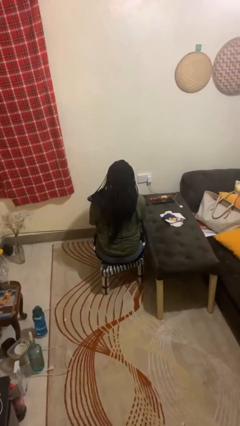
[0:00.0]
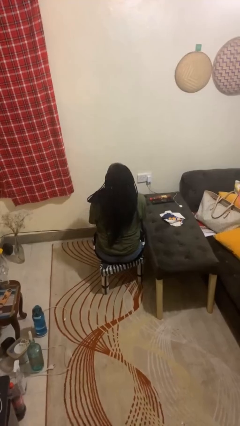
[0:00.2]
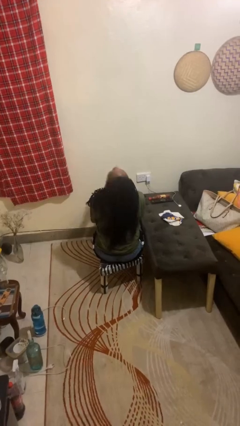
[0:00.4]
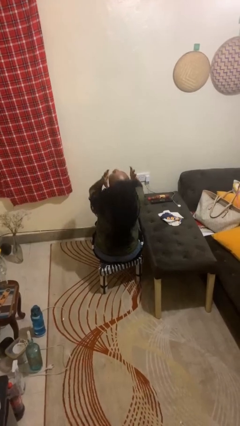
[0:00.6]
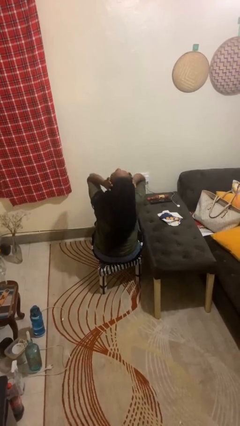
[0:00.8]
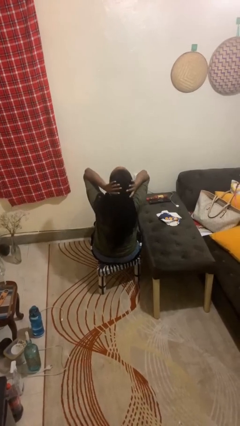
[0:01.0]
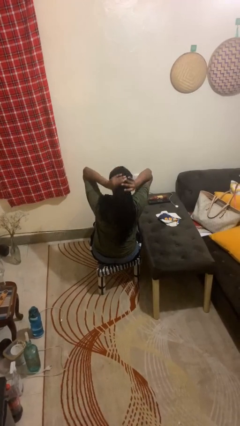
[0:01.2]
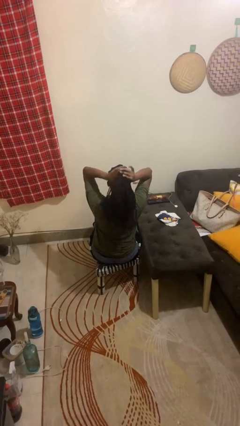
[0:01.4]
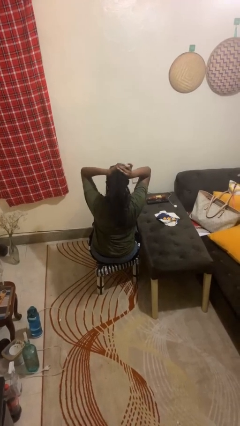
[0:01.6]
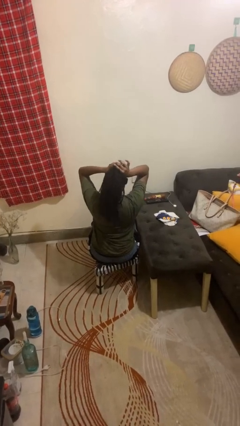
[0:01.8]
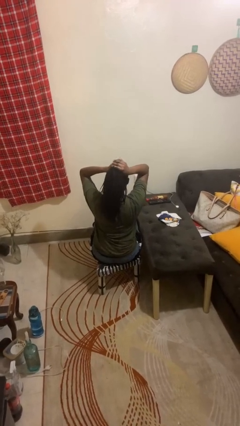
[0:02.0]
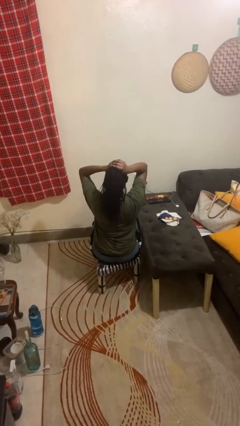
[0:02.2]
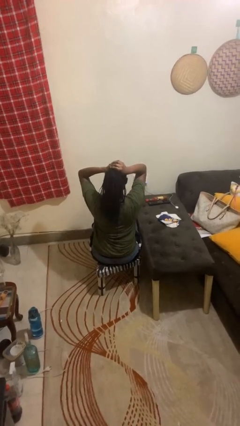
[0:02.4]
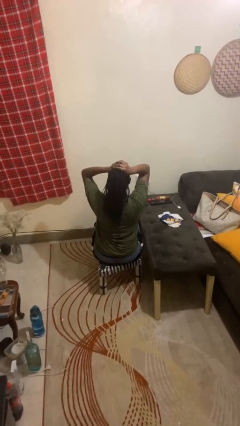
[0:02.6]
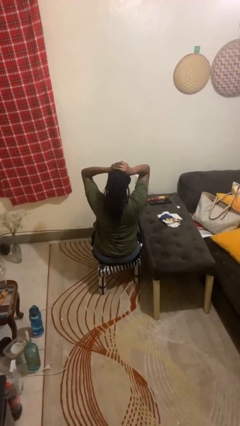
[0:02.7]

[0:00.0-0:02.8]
person puts hair in ponytail

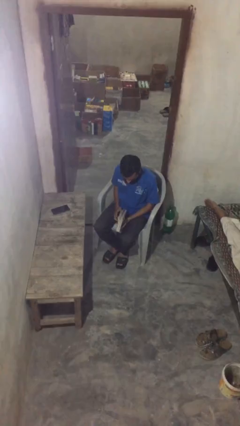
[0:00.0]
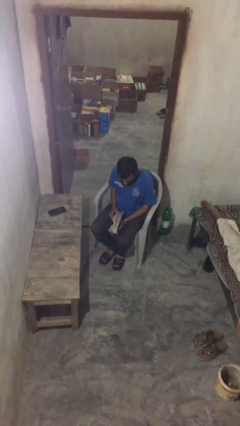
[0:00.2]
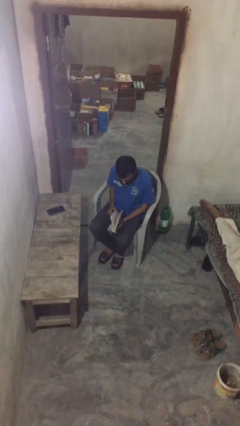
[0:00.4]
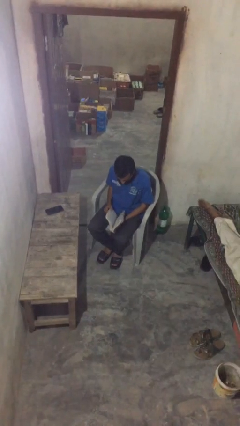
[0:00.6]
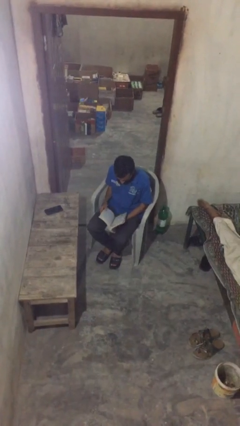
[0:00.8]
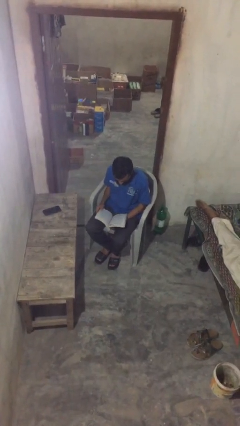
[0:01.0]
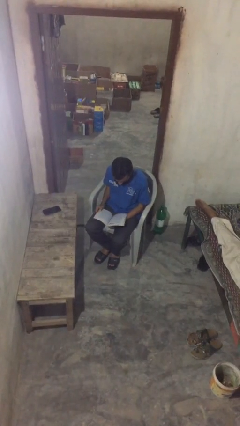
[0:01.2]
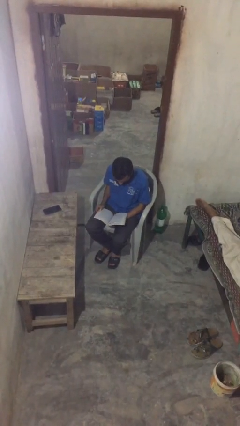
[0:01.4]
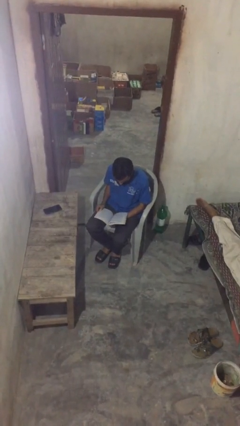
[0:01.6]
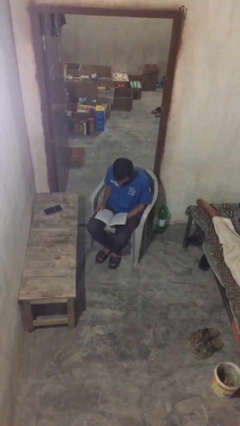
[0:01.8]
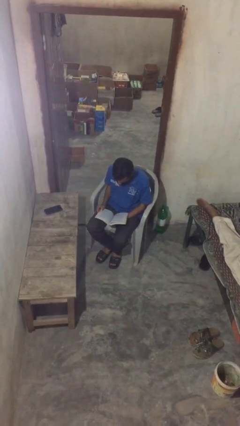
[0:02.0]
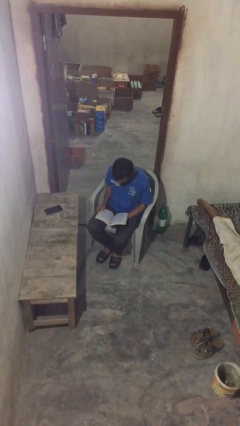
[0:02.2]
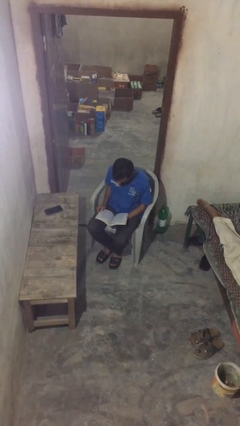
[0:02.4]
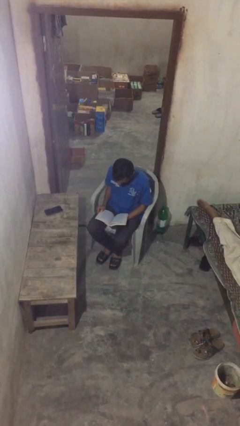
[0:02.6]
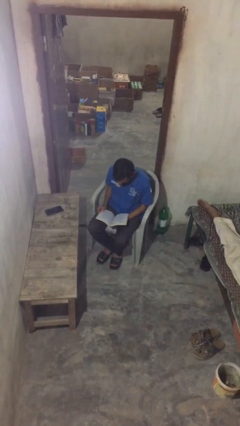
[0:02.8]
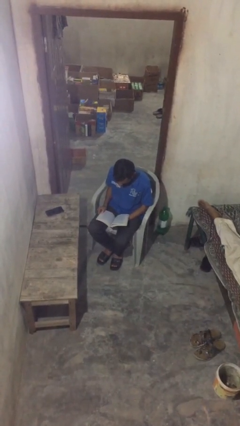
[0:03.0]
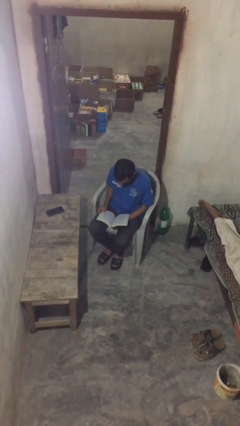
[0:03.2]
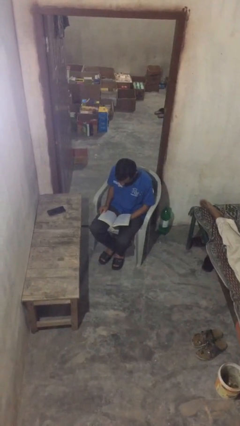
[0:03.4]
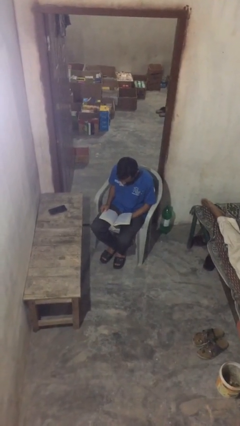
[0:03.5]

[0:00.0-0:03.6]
person reads document

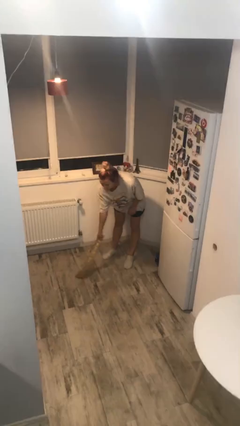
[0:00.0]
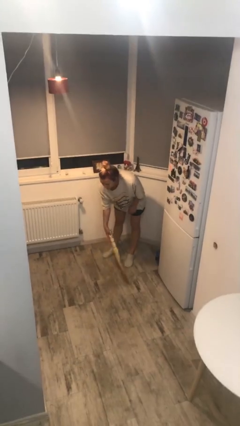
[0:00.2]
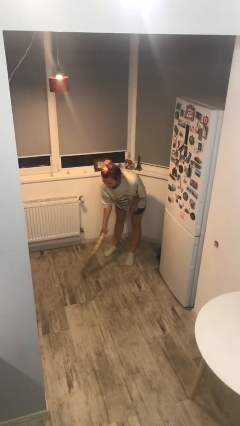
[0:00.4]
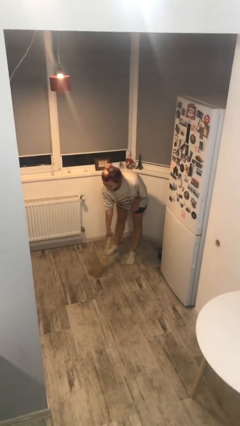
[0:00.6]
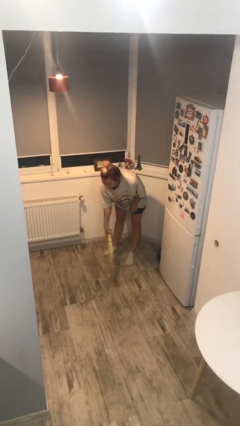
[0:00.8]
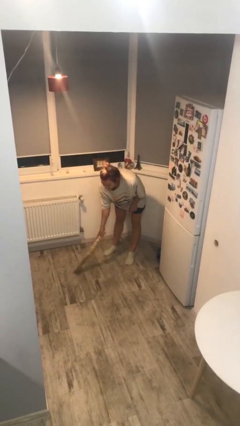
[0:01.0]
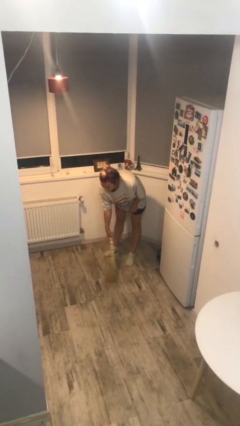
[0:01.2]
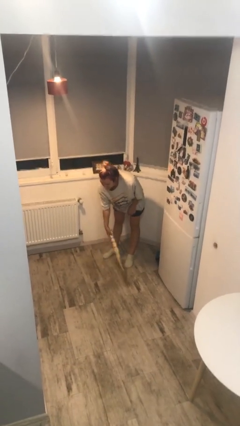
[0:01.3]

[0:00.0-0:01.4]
person sweeps floor

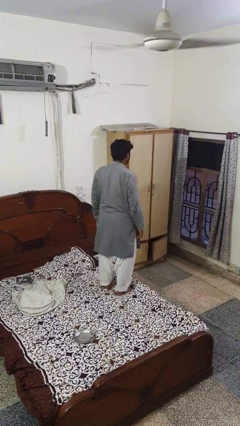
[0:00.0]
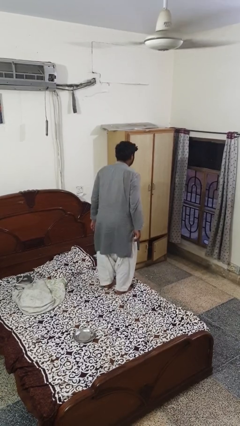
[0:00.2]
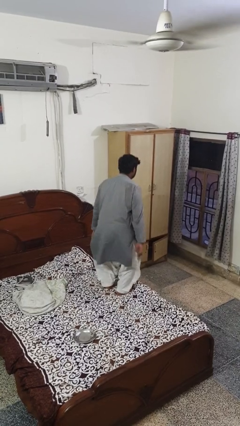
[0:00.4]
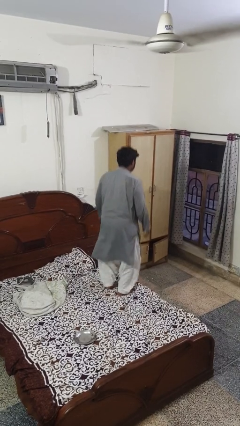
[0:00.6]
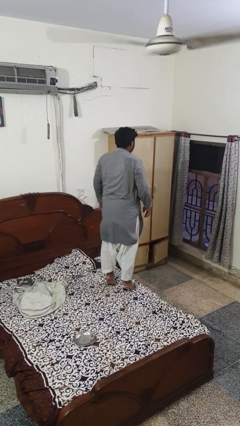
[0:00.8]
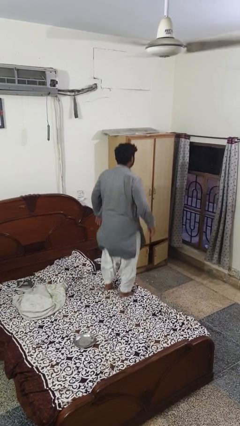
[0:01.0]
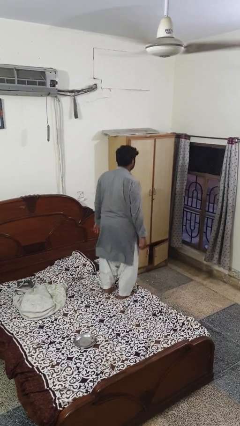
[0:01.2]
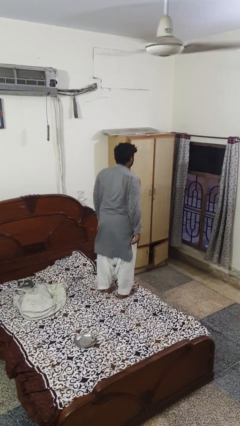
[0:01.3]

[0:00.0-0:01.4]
person jumps on bed

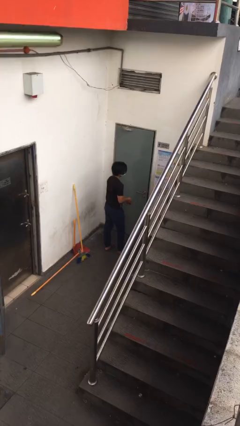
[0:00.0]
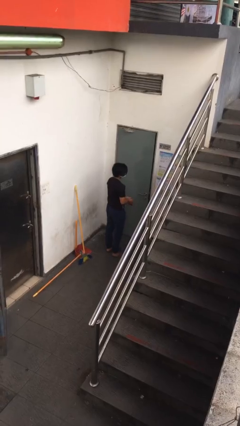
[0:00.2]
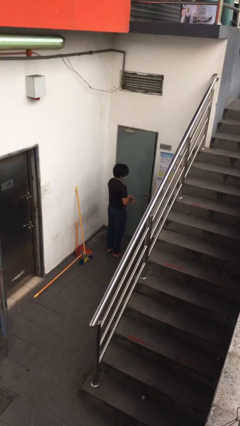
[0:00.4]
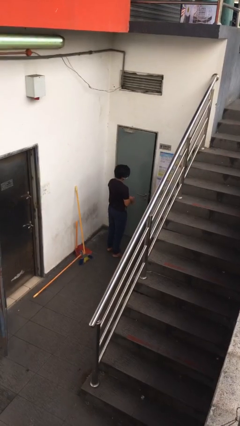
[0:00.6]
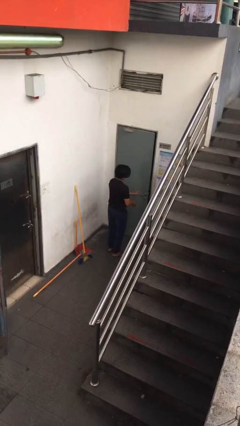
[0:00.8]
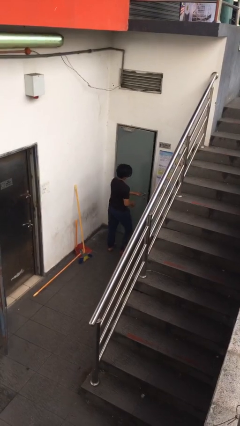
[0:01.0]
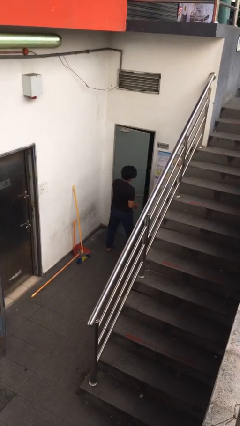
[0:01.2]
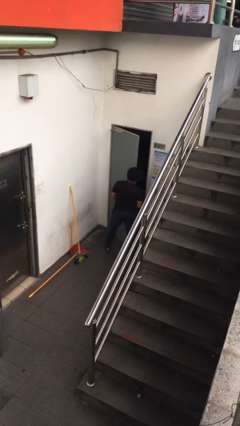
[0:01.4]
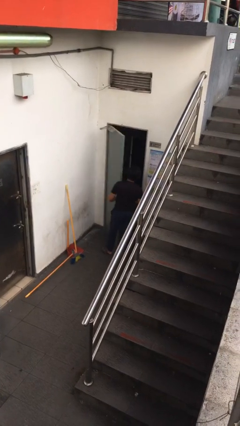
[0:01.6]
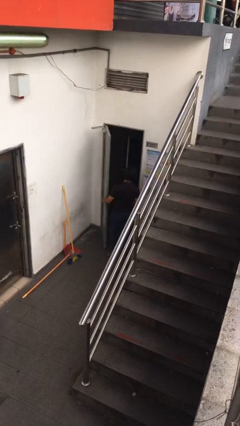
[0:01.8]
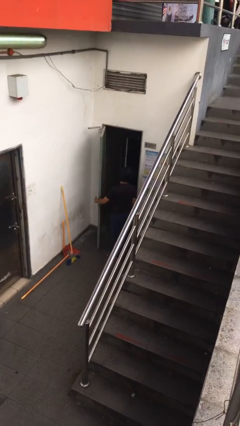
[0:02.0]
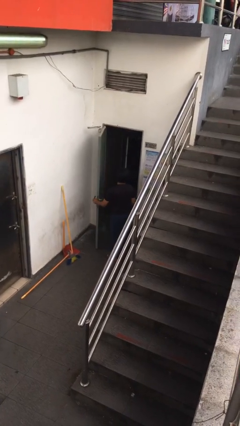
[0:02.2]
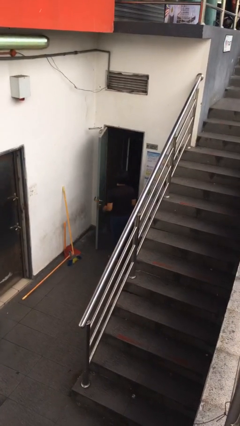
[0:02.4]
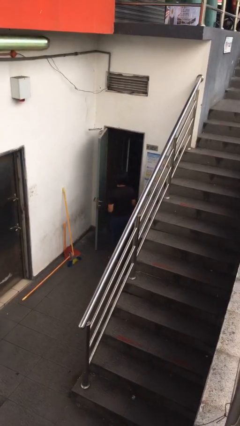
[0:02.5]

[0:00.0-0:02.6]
person opens facility door

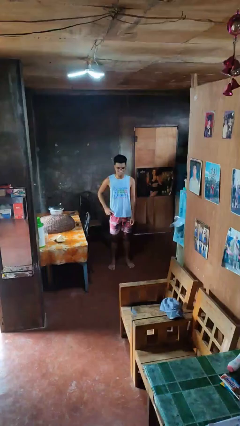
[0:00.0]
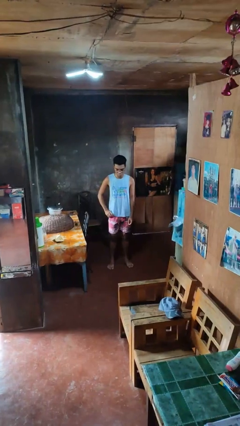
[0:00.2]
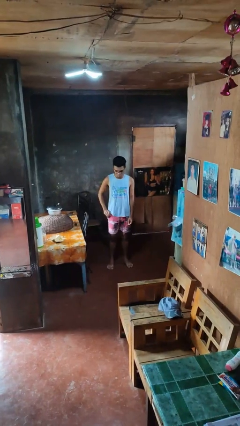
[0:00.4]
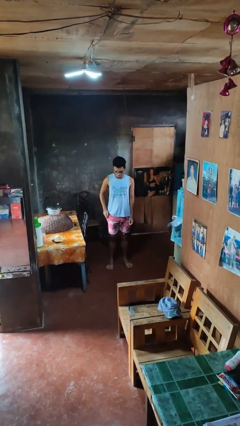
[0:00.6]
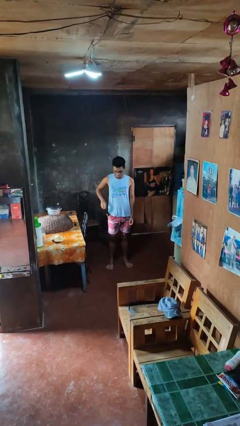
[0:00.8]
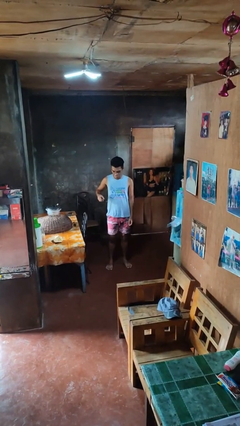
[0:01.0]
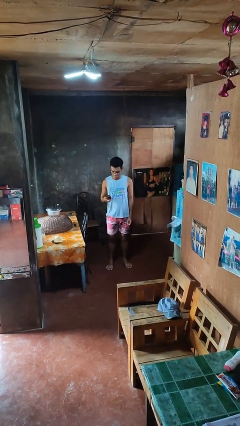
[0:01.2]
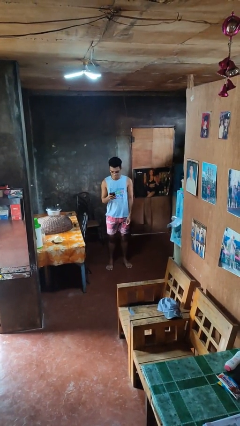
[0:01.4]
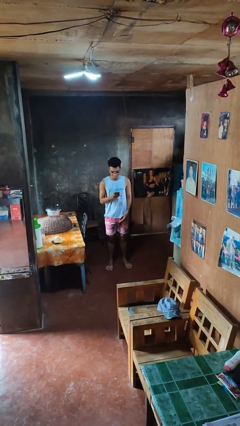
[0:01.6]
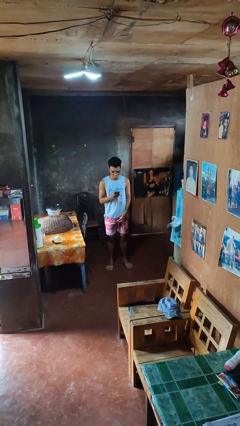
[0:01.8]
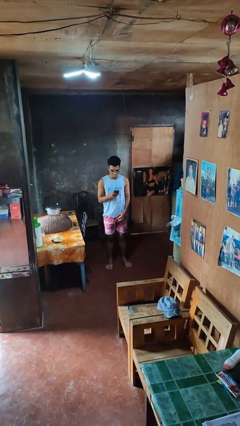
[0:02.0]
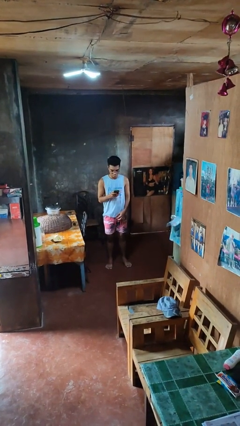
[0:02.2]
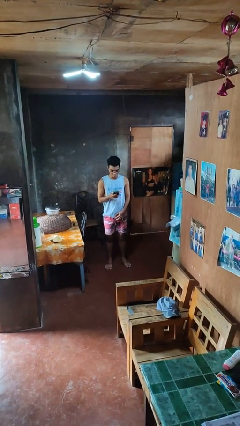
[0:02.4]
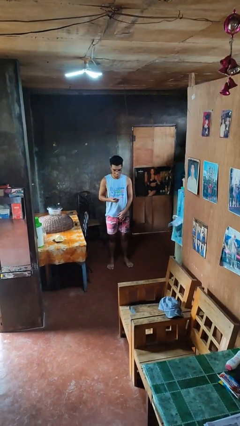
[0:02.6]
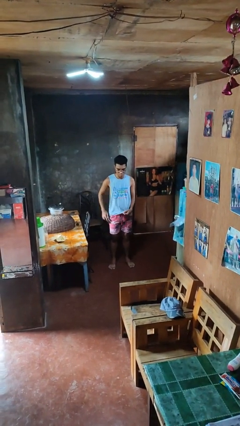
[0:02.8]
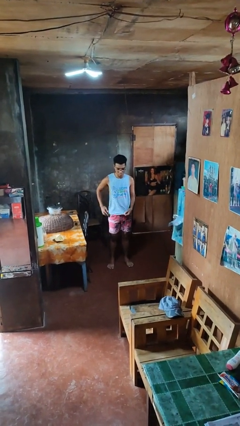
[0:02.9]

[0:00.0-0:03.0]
person takes phone from pocket

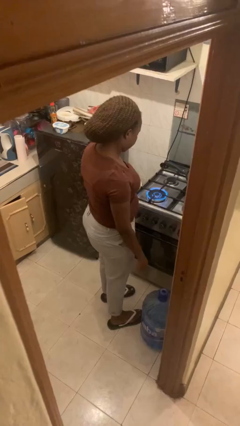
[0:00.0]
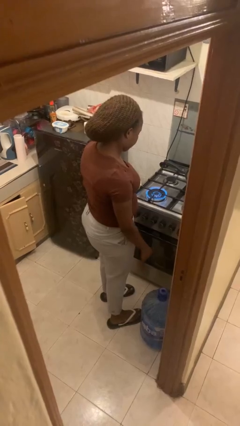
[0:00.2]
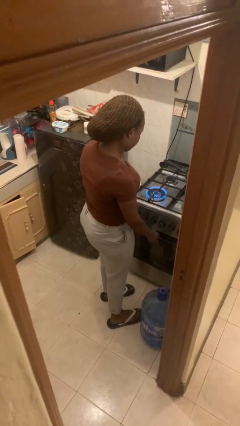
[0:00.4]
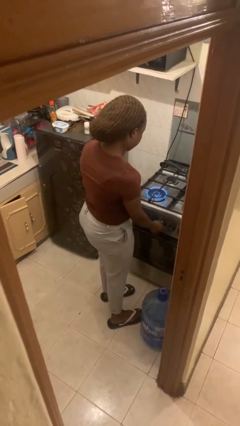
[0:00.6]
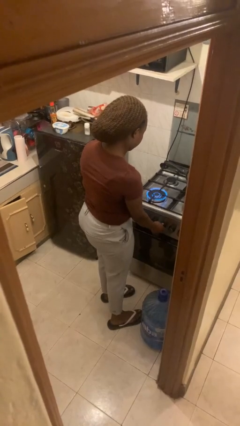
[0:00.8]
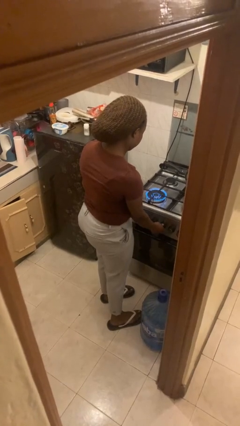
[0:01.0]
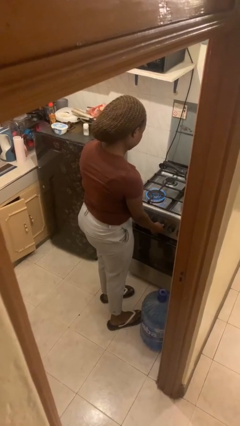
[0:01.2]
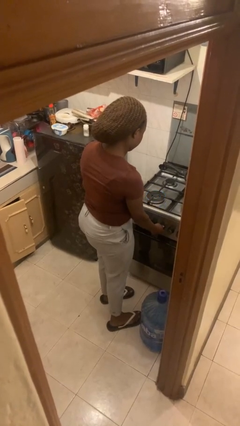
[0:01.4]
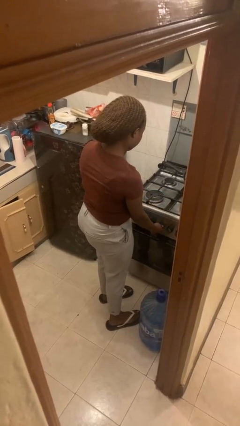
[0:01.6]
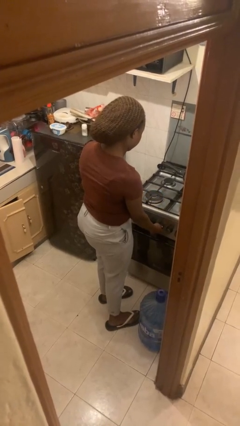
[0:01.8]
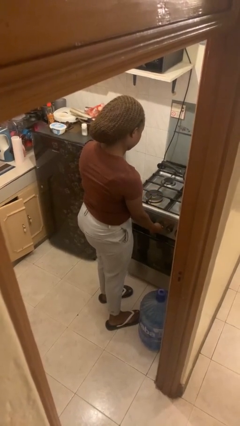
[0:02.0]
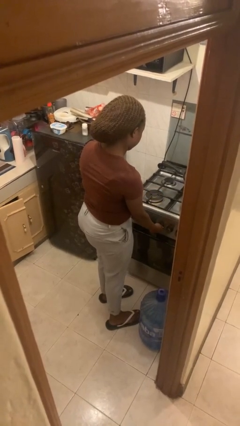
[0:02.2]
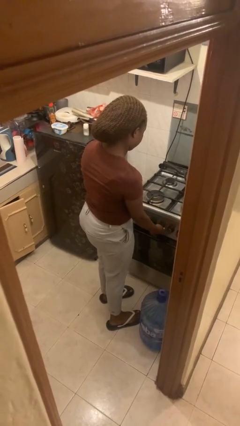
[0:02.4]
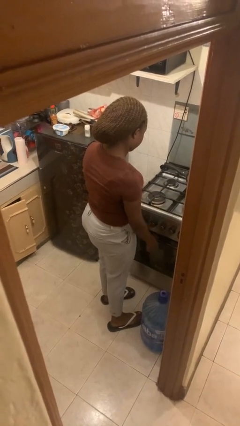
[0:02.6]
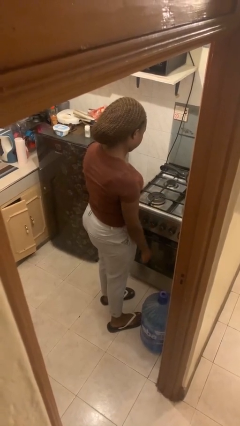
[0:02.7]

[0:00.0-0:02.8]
person turns off stovetop
